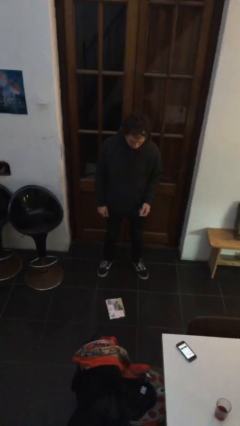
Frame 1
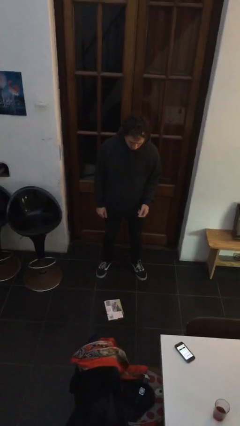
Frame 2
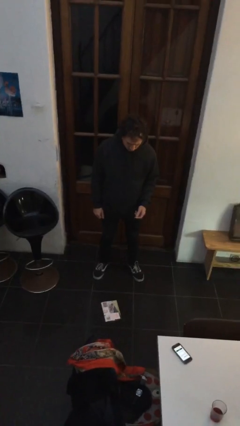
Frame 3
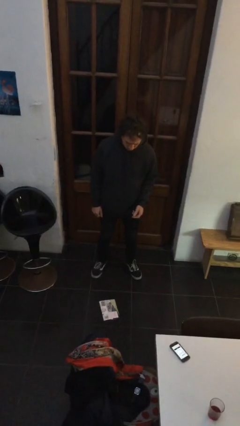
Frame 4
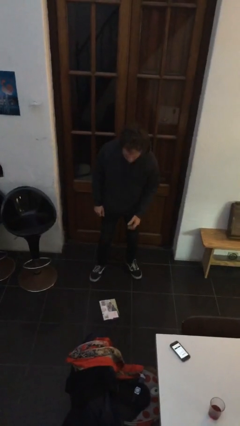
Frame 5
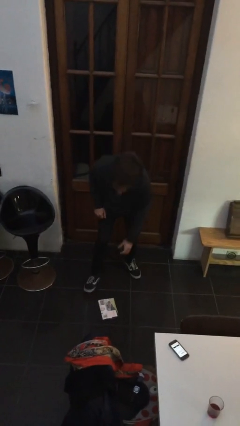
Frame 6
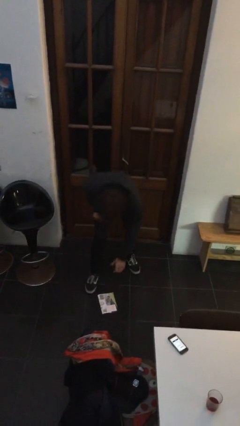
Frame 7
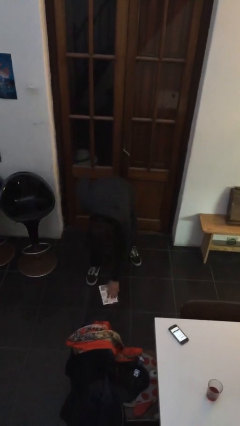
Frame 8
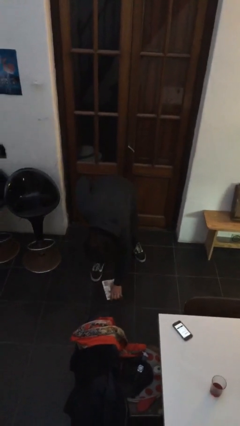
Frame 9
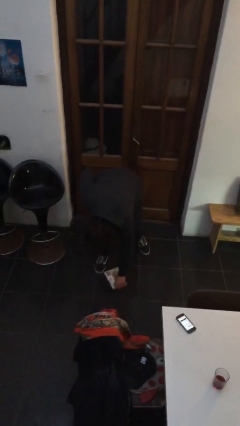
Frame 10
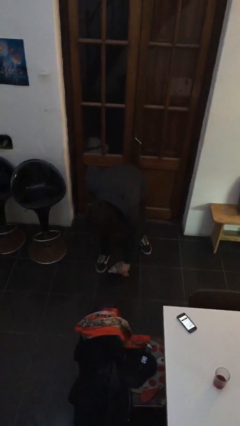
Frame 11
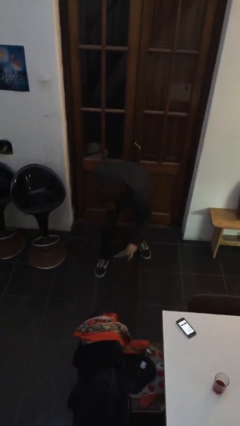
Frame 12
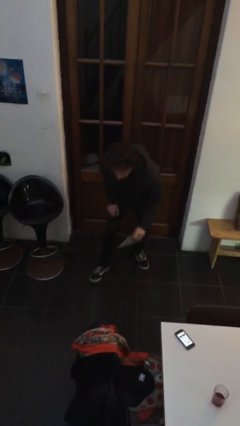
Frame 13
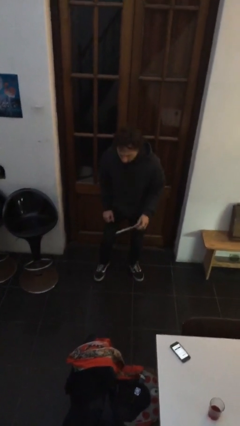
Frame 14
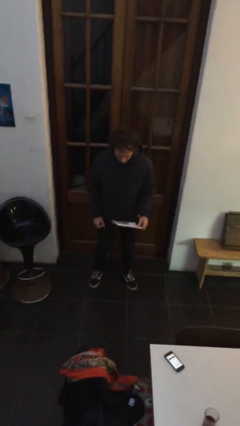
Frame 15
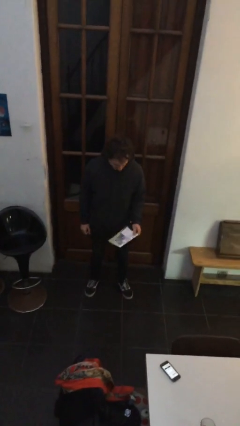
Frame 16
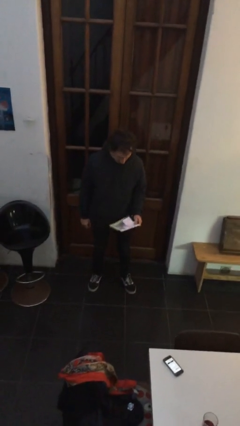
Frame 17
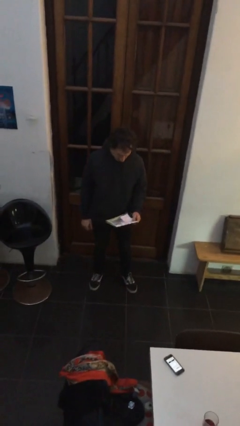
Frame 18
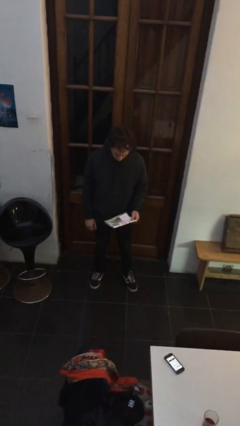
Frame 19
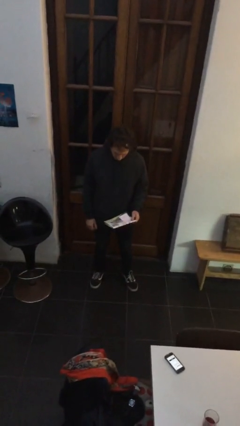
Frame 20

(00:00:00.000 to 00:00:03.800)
person picks up object from floor

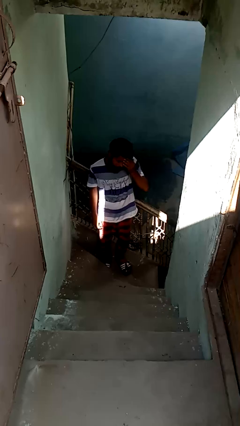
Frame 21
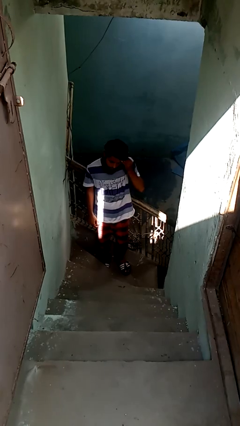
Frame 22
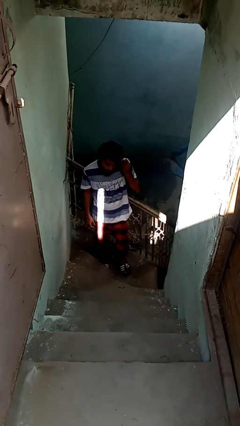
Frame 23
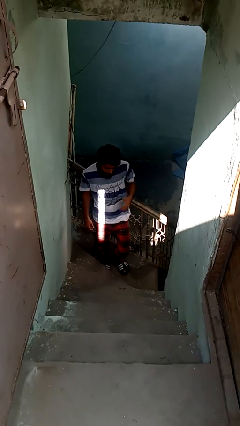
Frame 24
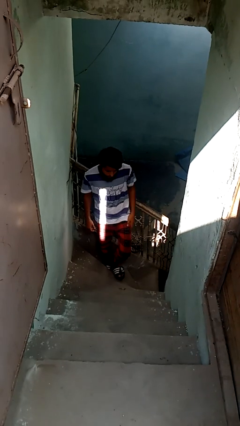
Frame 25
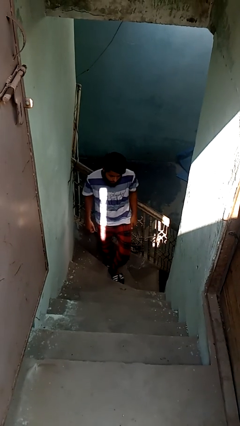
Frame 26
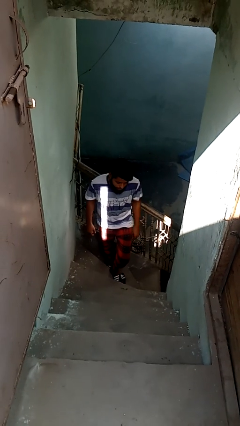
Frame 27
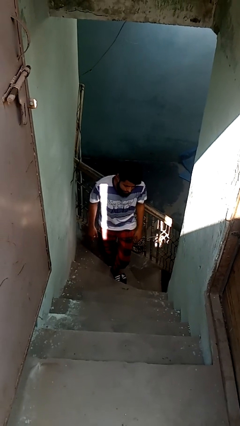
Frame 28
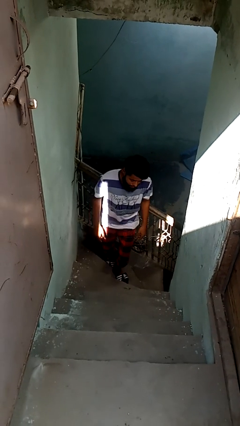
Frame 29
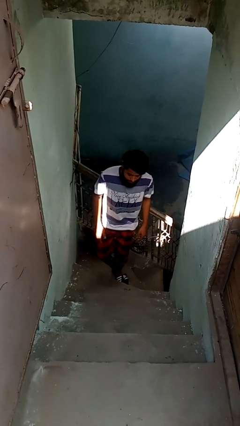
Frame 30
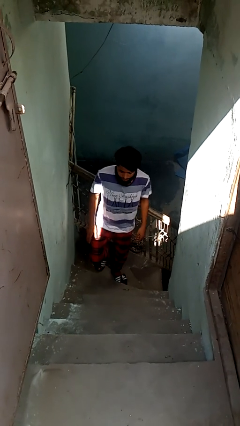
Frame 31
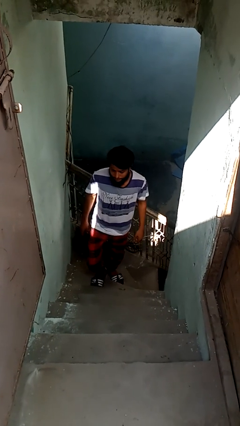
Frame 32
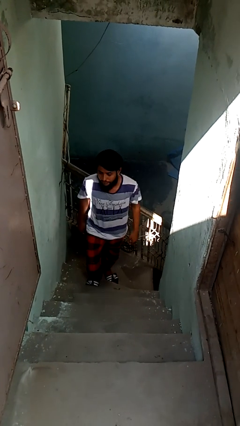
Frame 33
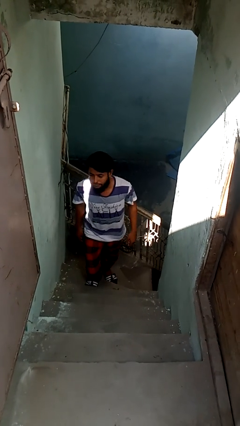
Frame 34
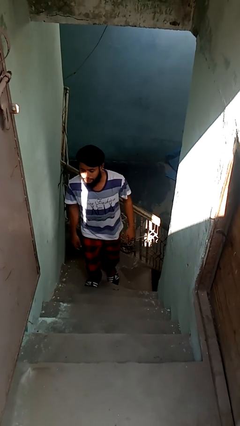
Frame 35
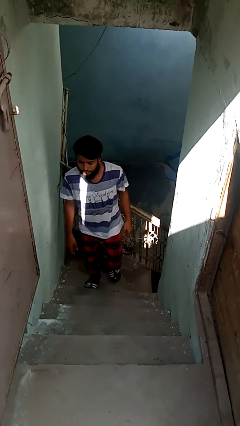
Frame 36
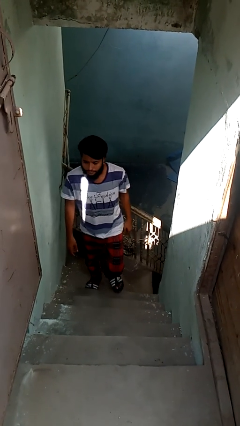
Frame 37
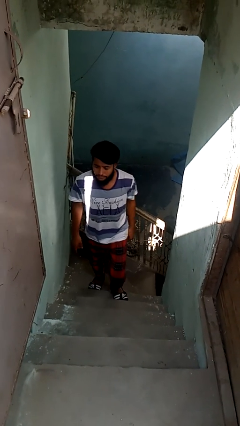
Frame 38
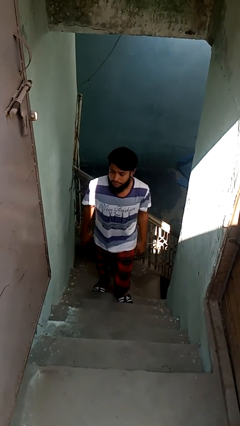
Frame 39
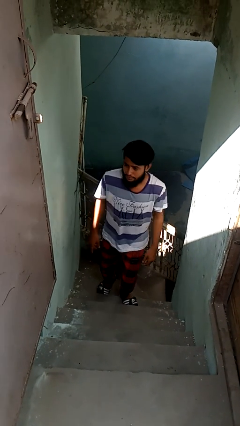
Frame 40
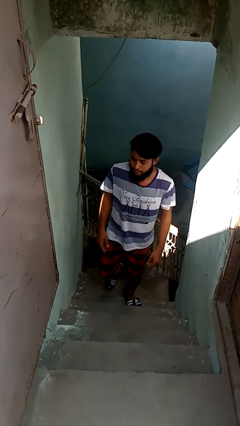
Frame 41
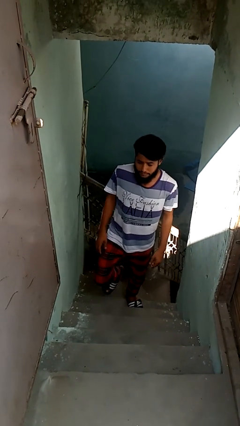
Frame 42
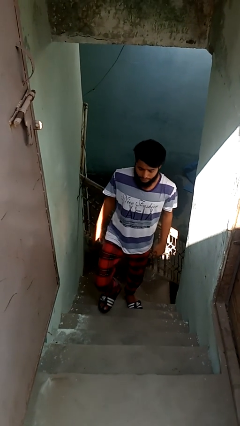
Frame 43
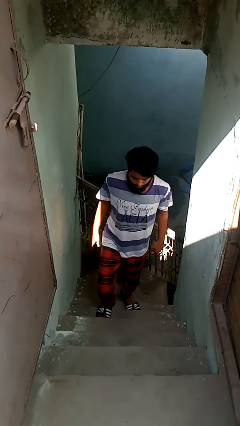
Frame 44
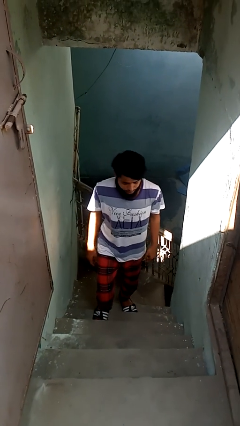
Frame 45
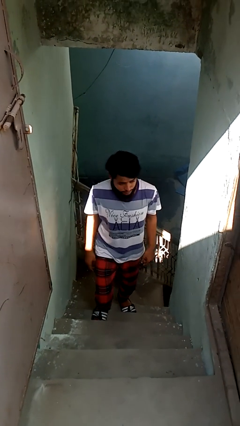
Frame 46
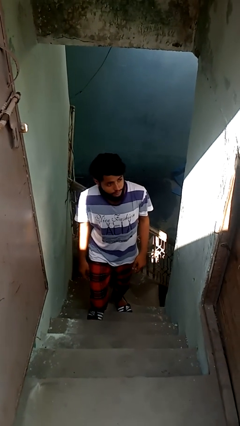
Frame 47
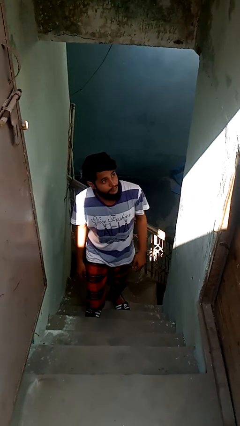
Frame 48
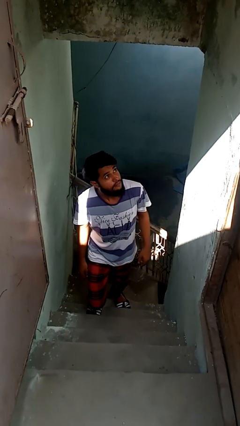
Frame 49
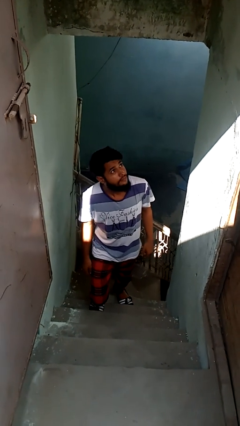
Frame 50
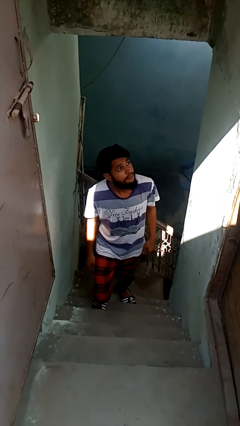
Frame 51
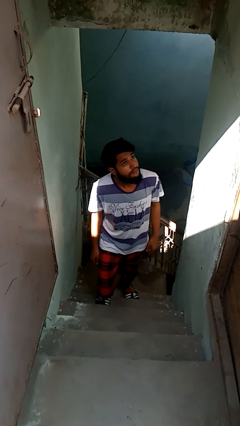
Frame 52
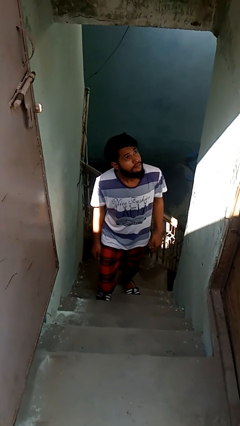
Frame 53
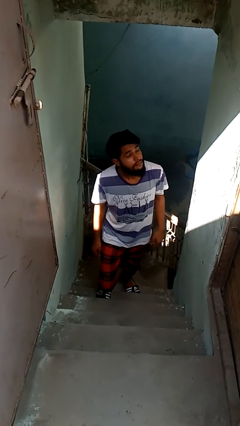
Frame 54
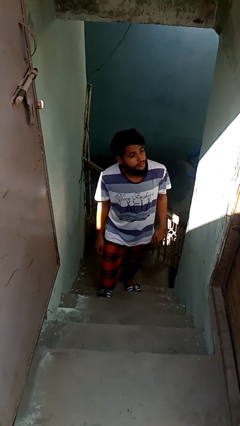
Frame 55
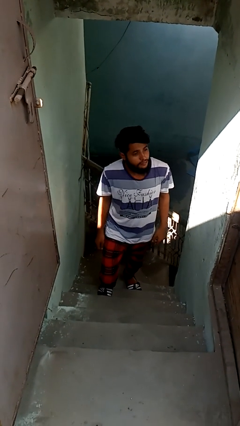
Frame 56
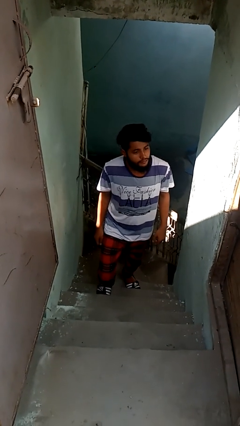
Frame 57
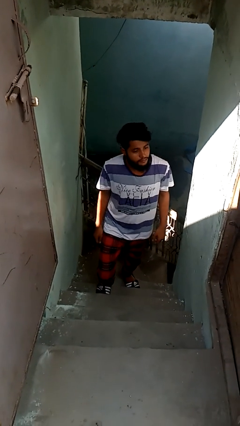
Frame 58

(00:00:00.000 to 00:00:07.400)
person climbs up stairs

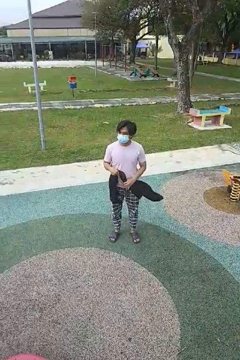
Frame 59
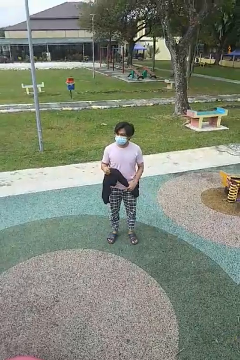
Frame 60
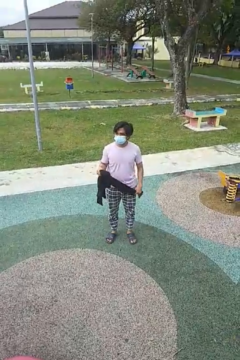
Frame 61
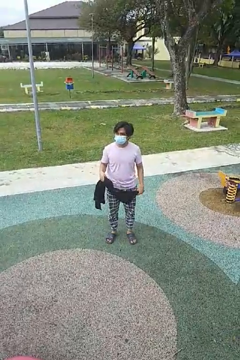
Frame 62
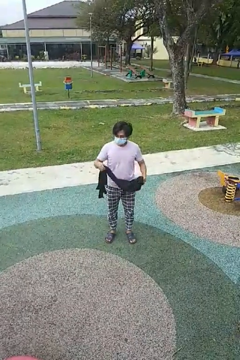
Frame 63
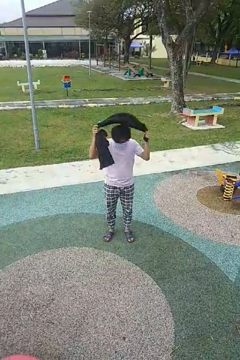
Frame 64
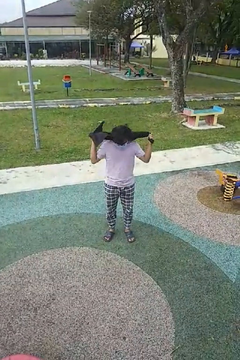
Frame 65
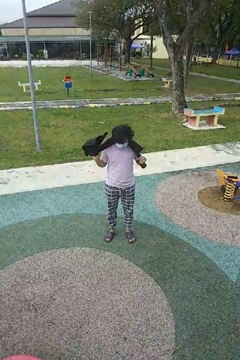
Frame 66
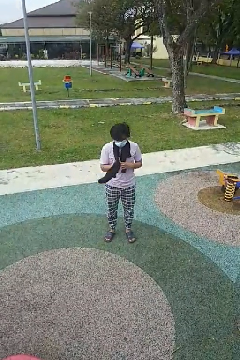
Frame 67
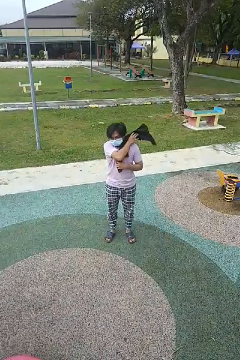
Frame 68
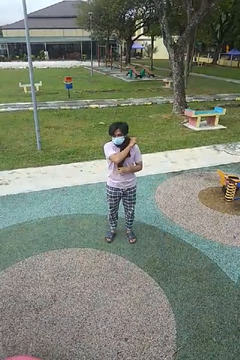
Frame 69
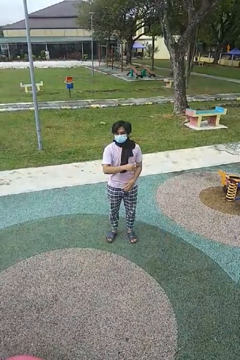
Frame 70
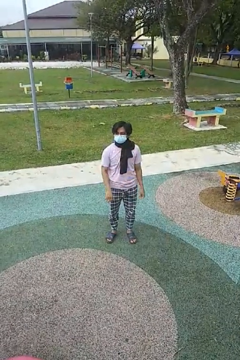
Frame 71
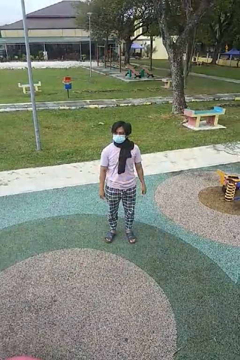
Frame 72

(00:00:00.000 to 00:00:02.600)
person puts on scarf

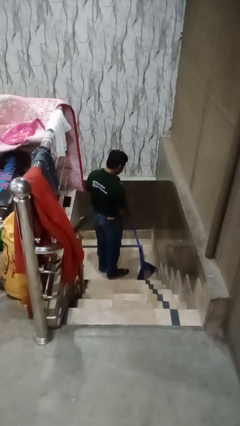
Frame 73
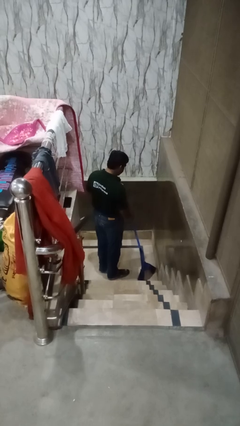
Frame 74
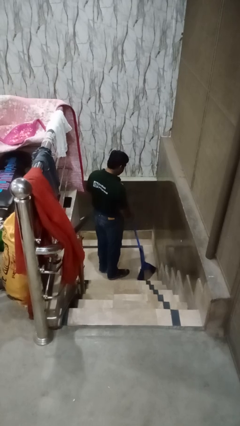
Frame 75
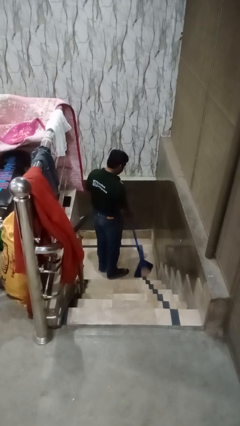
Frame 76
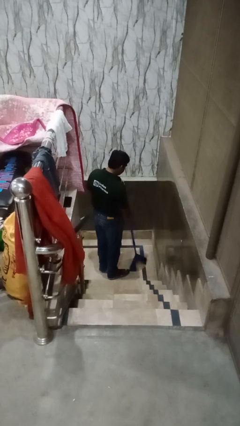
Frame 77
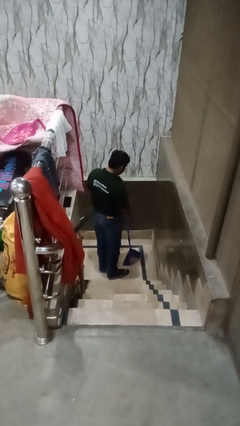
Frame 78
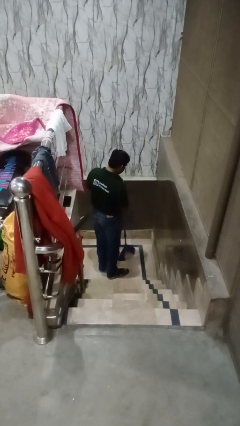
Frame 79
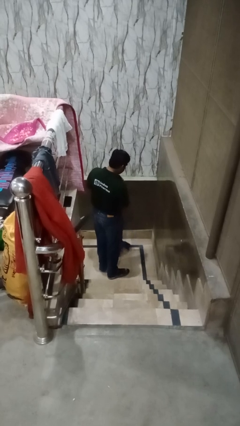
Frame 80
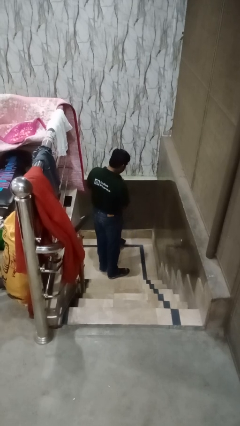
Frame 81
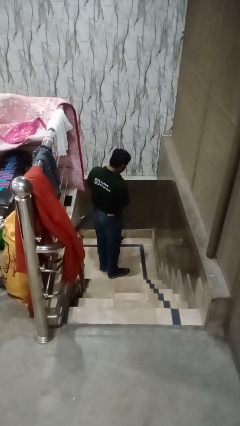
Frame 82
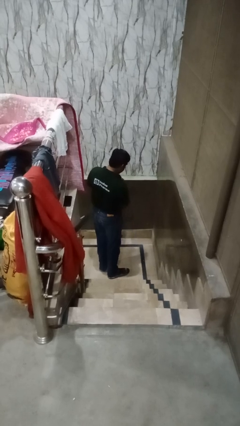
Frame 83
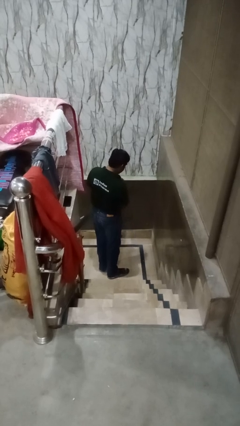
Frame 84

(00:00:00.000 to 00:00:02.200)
person sweeps floor

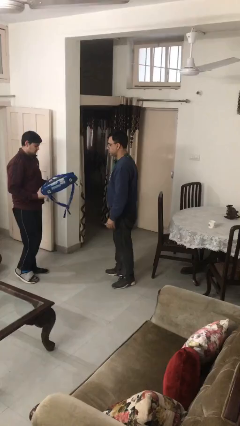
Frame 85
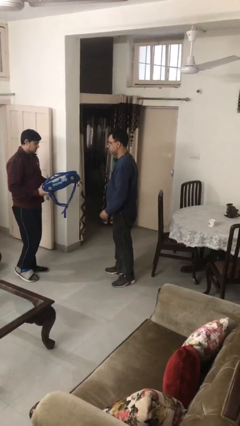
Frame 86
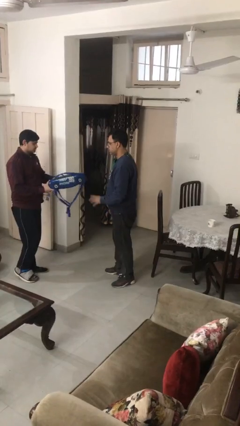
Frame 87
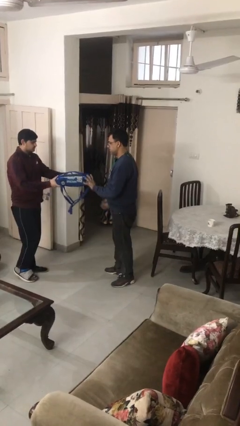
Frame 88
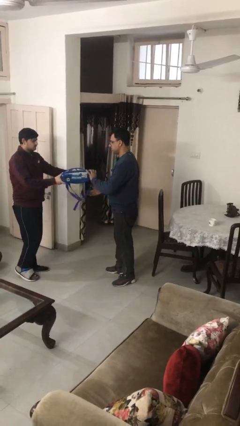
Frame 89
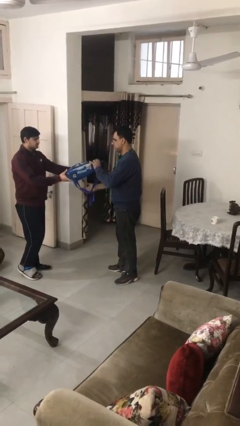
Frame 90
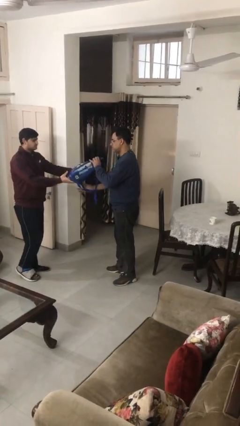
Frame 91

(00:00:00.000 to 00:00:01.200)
person transfers object to person

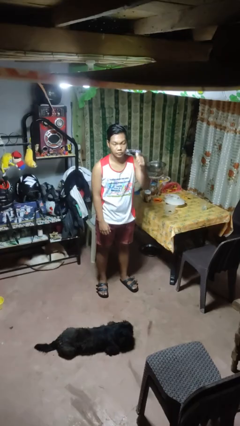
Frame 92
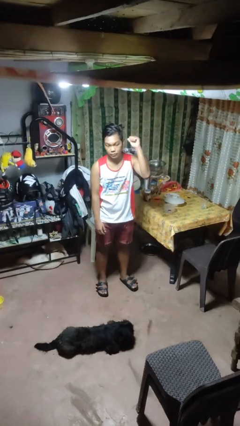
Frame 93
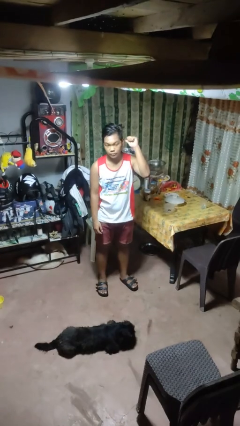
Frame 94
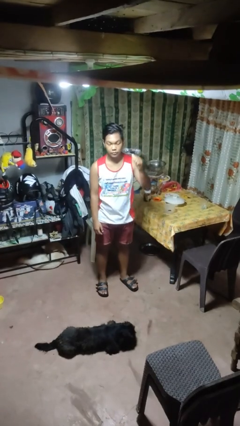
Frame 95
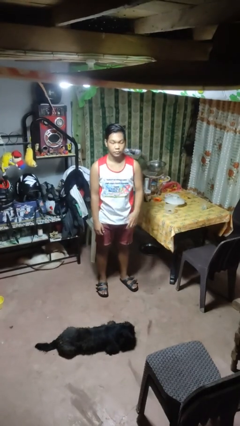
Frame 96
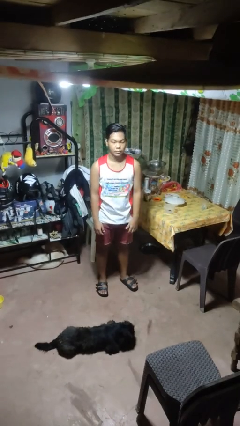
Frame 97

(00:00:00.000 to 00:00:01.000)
person gestures behind me
